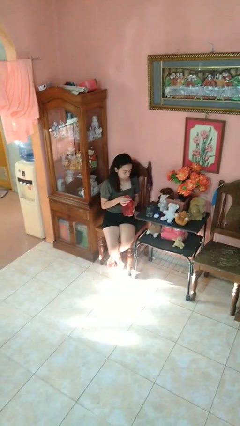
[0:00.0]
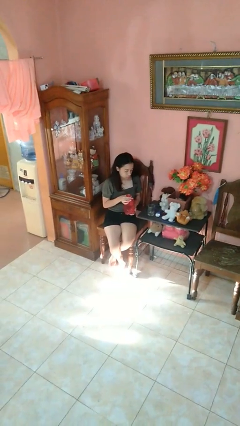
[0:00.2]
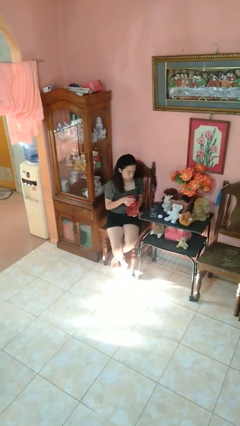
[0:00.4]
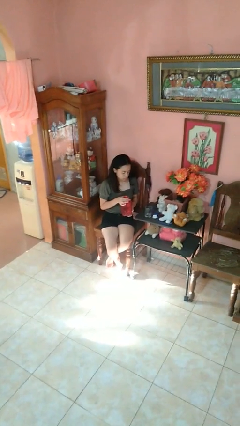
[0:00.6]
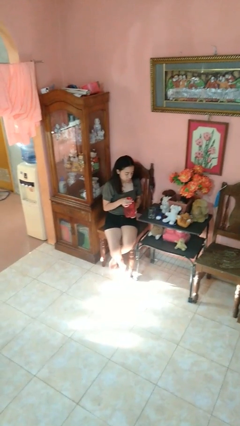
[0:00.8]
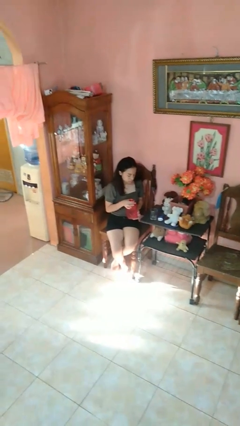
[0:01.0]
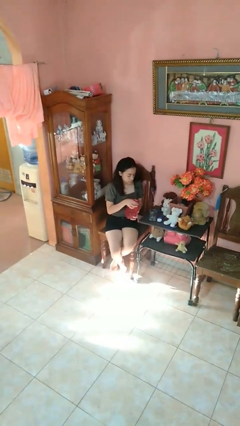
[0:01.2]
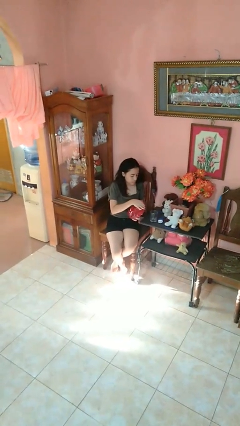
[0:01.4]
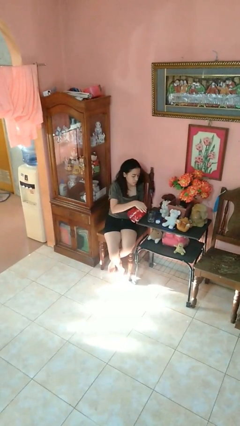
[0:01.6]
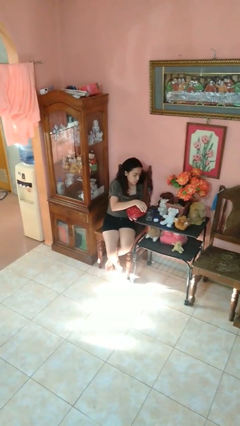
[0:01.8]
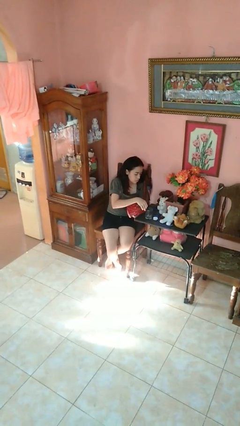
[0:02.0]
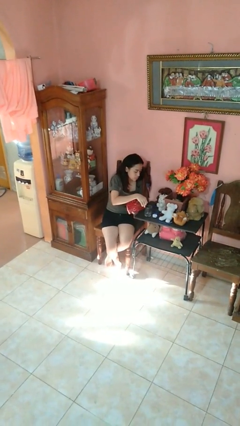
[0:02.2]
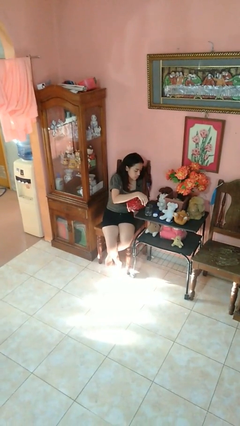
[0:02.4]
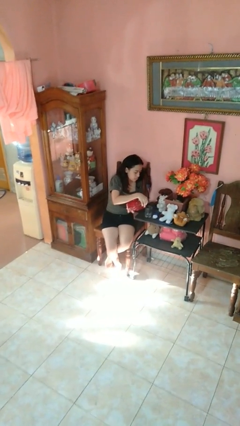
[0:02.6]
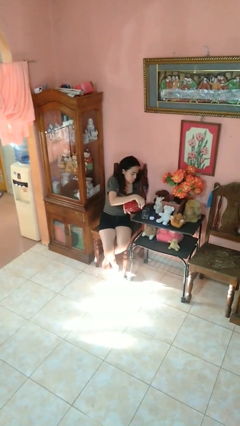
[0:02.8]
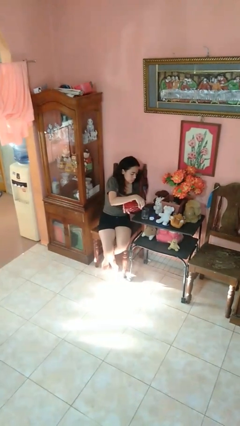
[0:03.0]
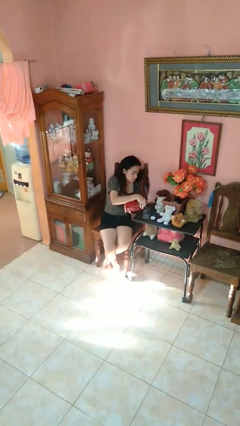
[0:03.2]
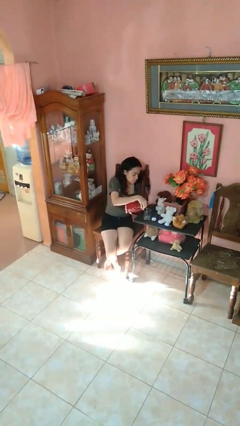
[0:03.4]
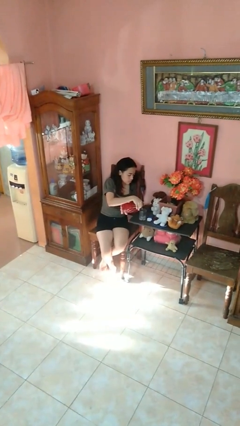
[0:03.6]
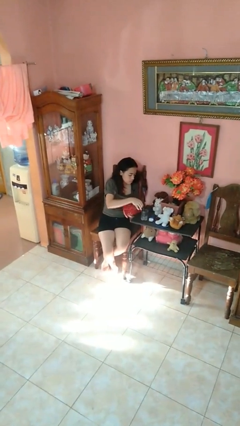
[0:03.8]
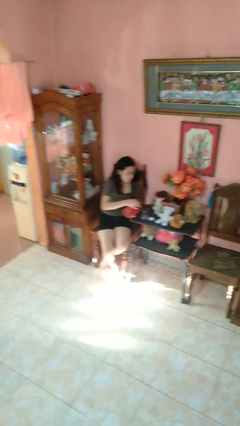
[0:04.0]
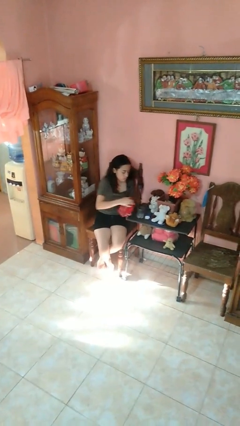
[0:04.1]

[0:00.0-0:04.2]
person pours liquid into cup

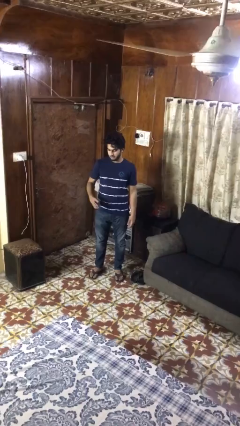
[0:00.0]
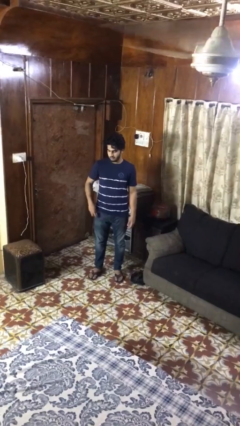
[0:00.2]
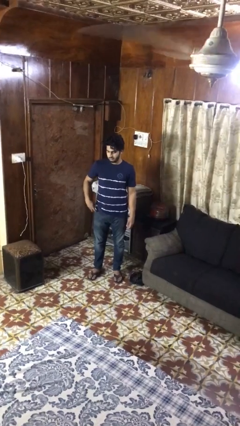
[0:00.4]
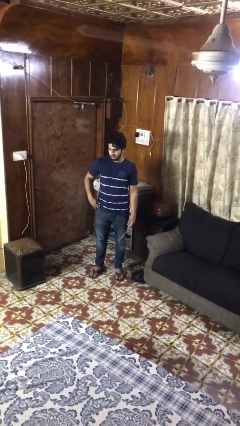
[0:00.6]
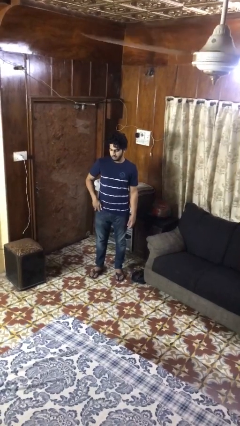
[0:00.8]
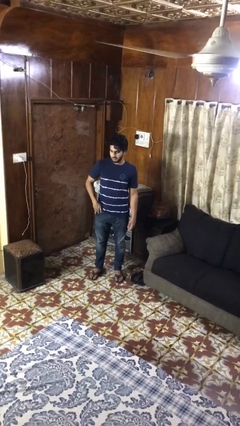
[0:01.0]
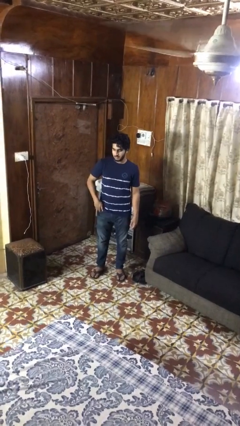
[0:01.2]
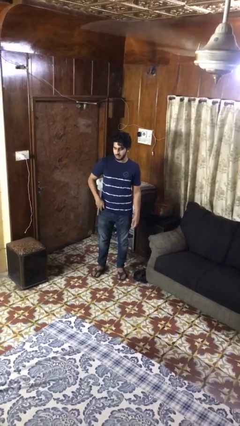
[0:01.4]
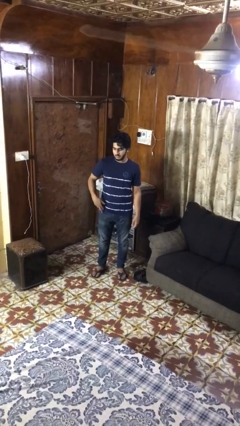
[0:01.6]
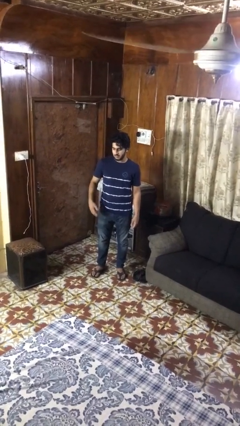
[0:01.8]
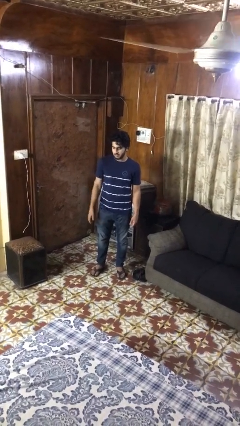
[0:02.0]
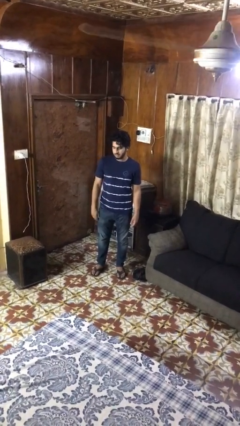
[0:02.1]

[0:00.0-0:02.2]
person puts phone into pocket

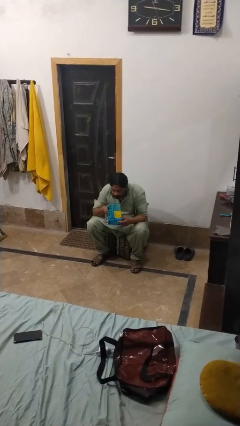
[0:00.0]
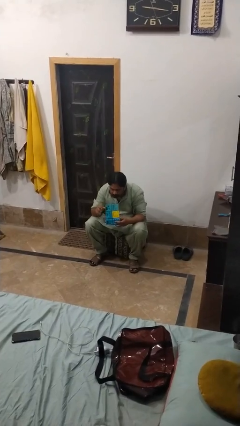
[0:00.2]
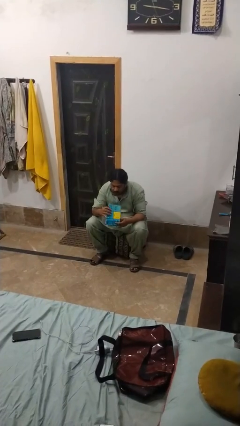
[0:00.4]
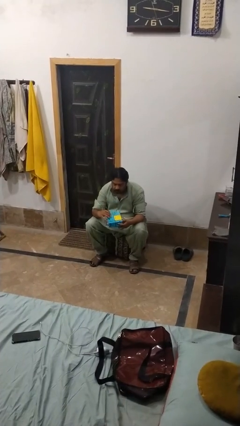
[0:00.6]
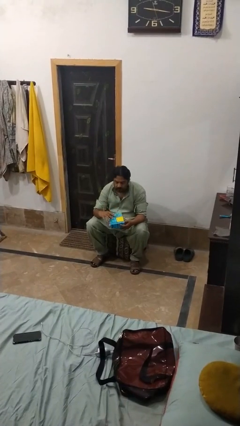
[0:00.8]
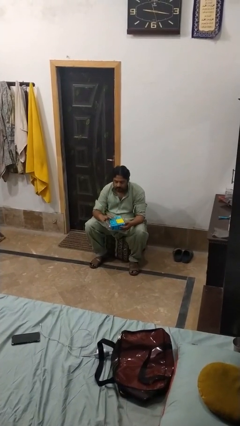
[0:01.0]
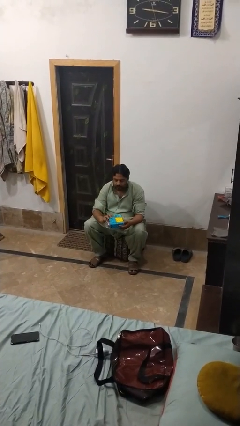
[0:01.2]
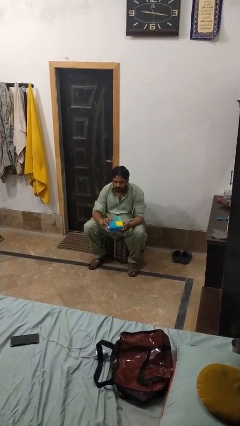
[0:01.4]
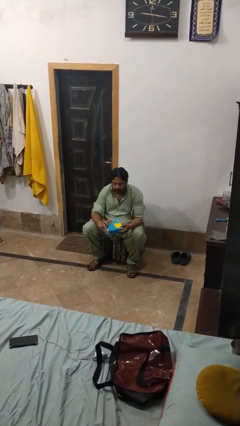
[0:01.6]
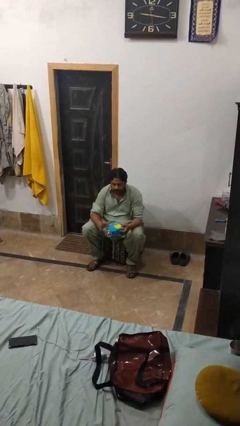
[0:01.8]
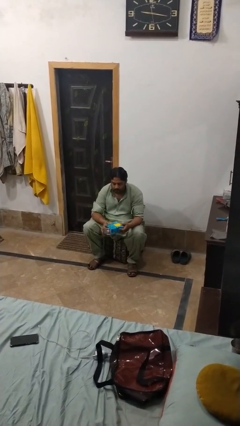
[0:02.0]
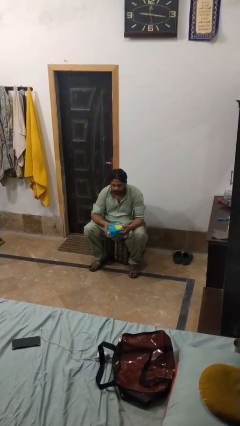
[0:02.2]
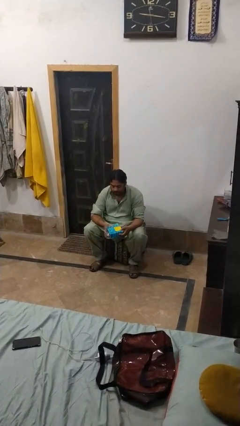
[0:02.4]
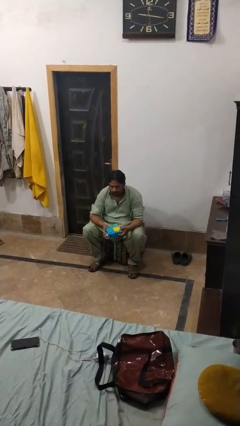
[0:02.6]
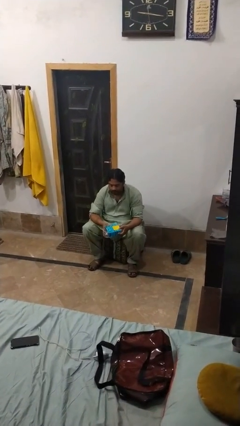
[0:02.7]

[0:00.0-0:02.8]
person closes jewelry box

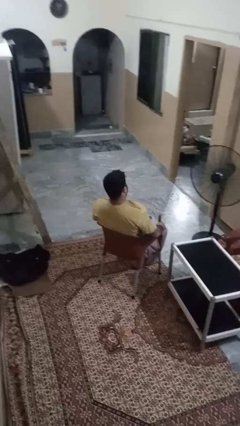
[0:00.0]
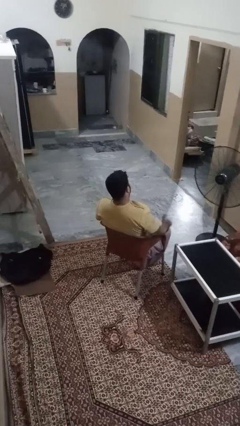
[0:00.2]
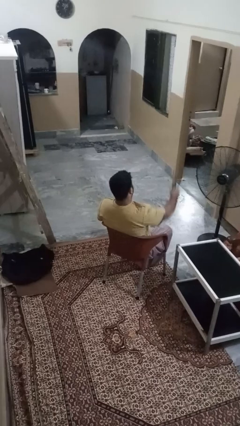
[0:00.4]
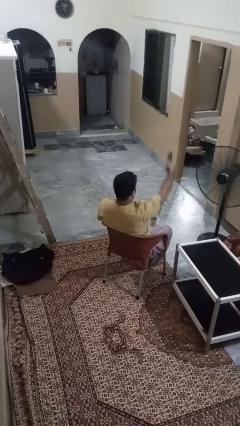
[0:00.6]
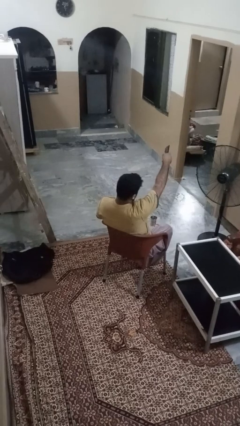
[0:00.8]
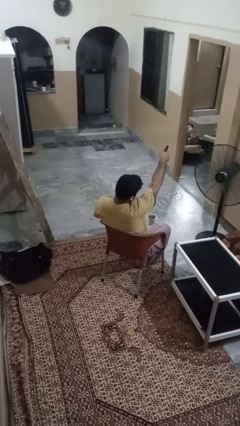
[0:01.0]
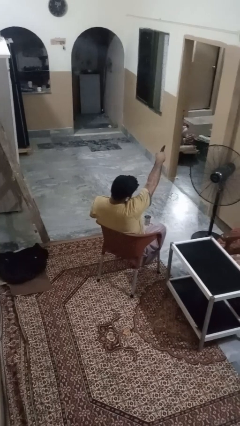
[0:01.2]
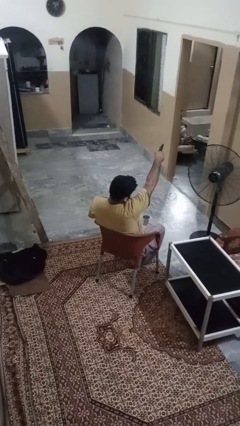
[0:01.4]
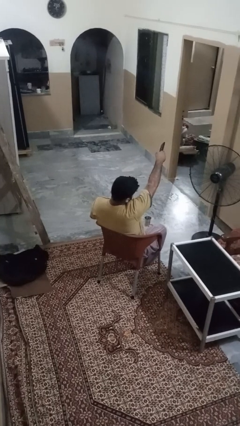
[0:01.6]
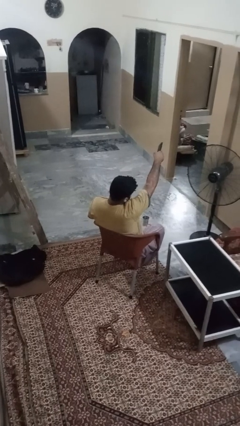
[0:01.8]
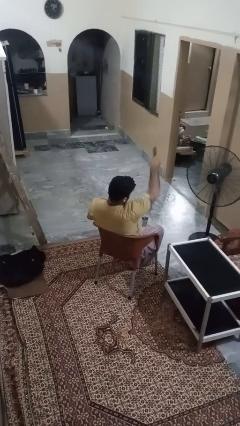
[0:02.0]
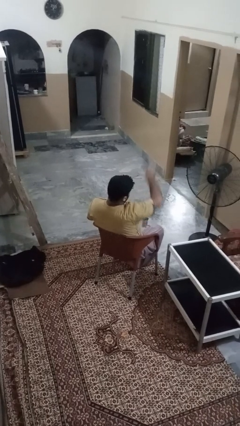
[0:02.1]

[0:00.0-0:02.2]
person uses television remote

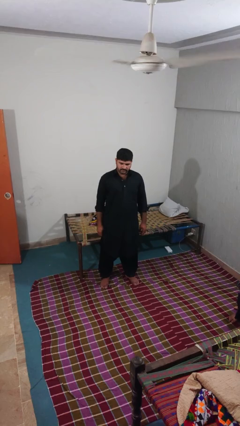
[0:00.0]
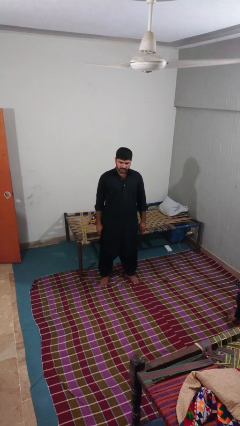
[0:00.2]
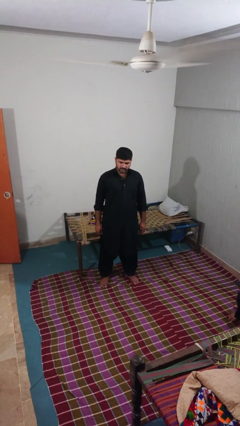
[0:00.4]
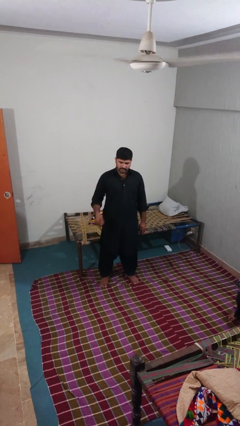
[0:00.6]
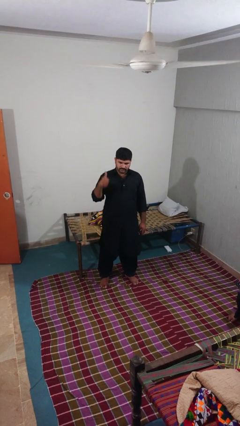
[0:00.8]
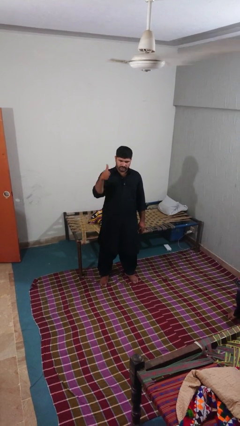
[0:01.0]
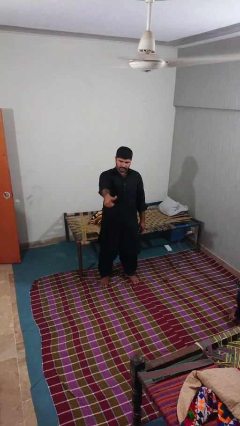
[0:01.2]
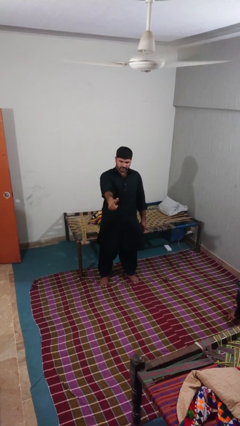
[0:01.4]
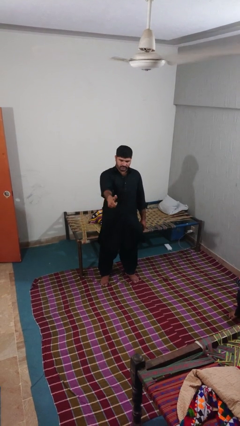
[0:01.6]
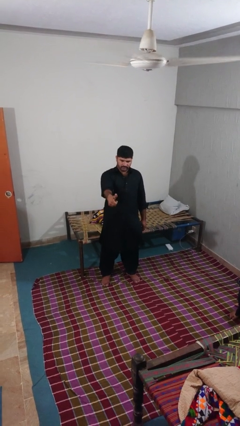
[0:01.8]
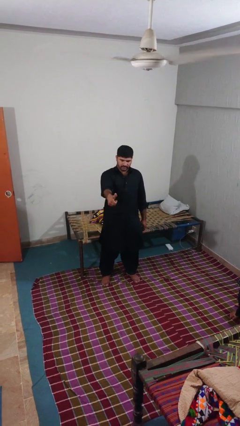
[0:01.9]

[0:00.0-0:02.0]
person gestures thumbs up

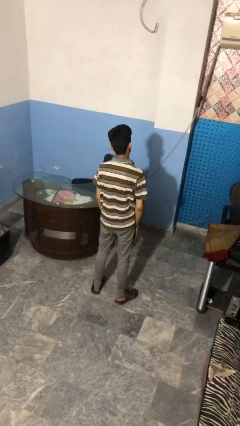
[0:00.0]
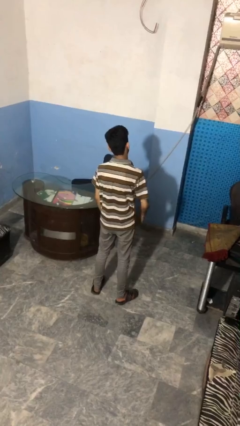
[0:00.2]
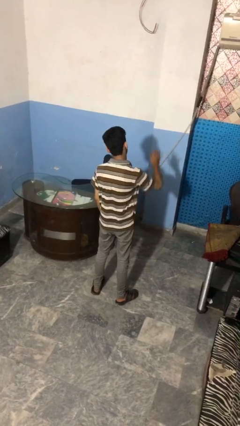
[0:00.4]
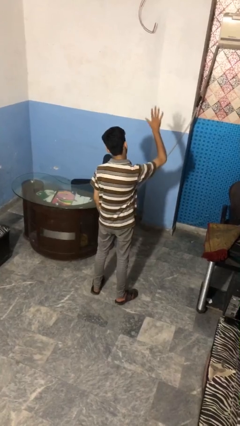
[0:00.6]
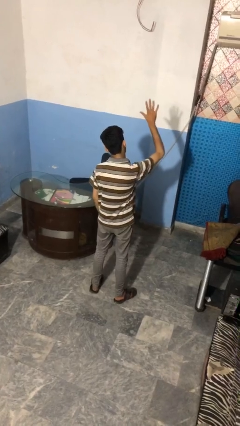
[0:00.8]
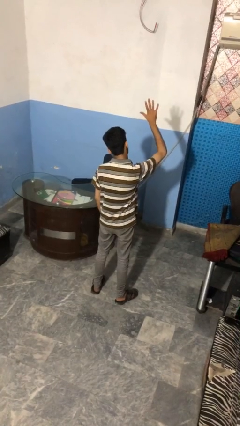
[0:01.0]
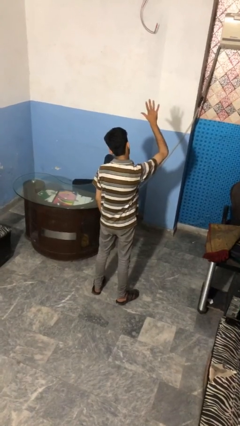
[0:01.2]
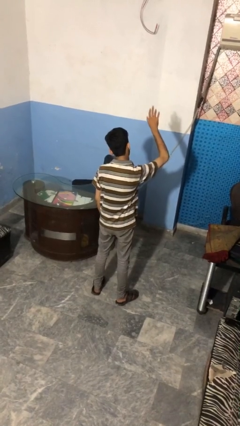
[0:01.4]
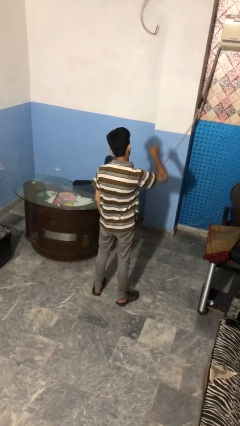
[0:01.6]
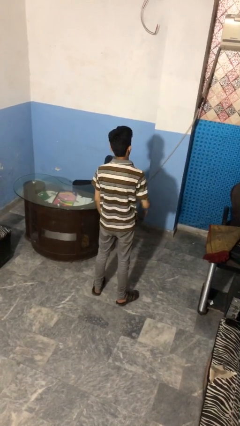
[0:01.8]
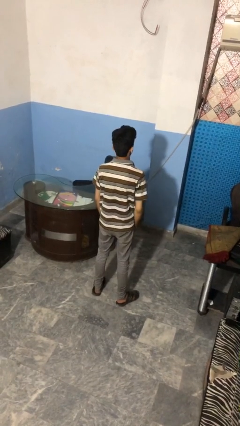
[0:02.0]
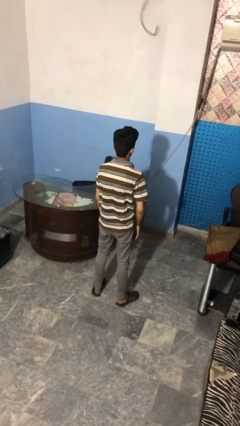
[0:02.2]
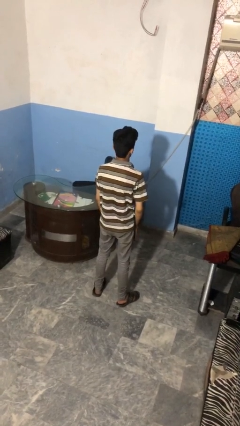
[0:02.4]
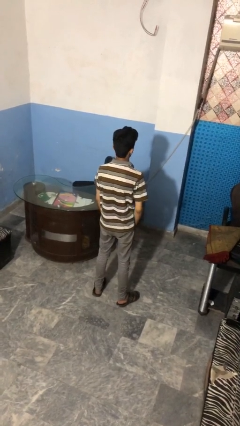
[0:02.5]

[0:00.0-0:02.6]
person gestures number five

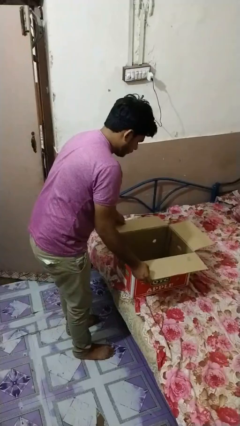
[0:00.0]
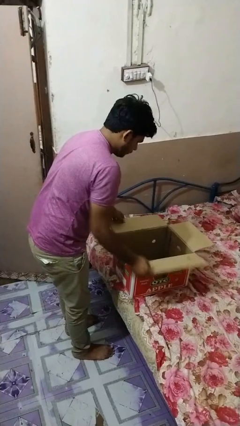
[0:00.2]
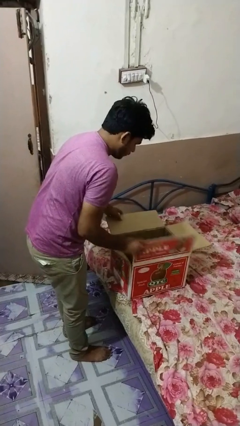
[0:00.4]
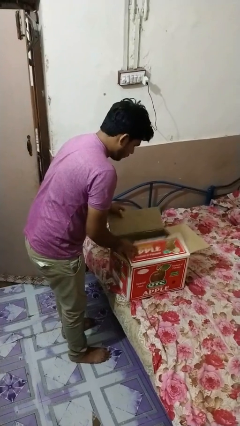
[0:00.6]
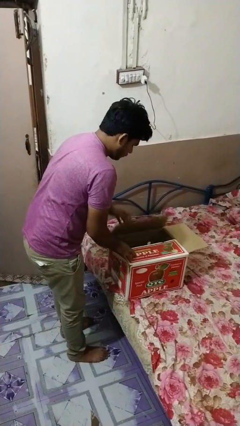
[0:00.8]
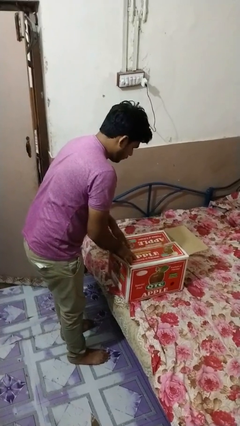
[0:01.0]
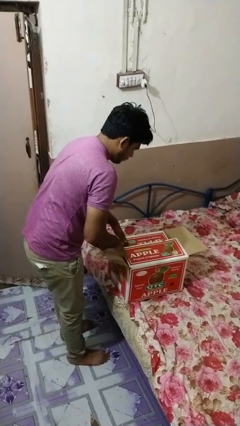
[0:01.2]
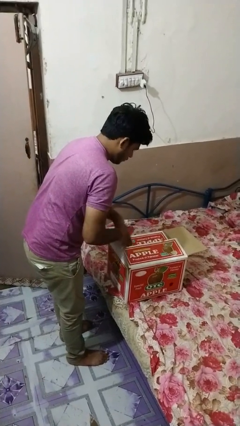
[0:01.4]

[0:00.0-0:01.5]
person opens box
